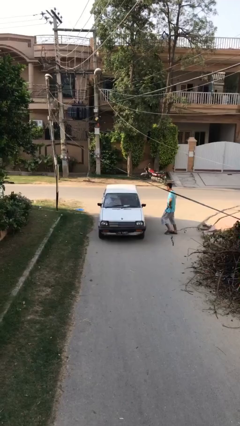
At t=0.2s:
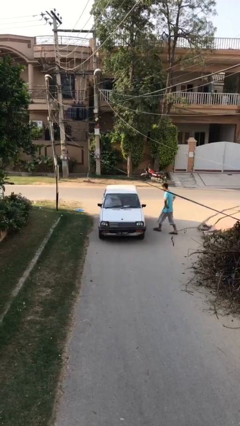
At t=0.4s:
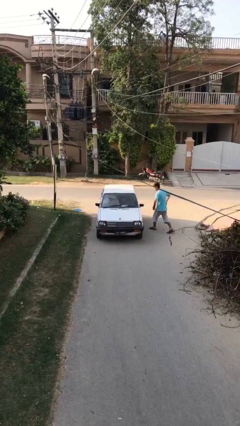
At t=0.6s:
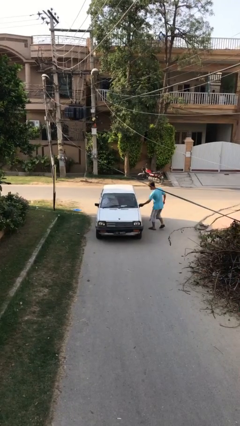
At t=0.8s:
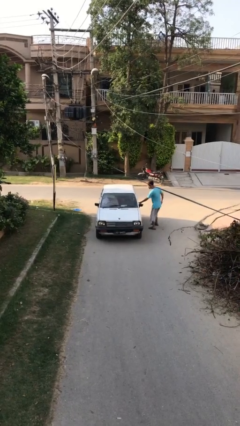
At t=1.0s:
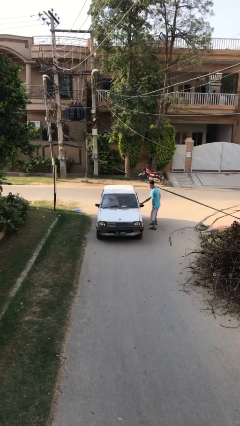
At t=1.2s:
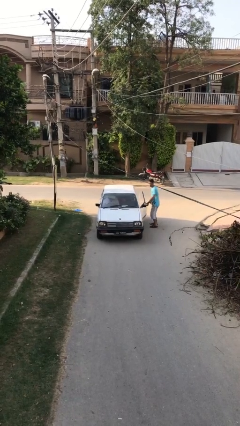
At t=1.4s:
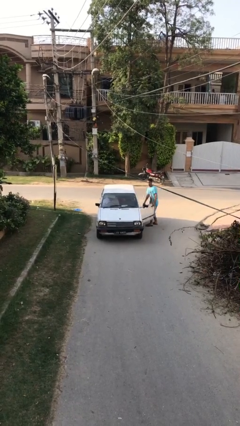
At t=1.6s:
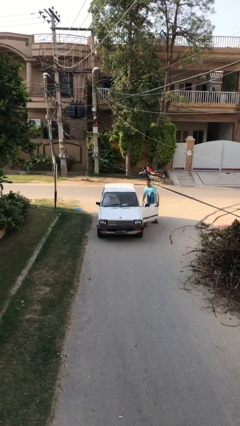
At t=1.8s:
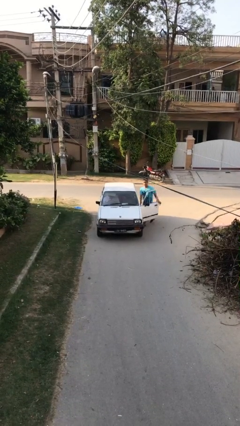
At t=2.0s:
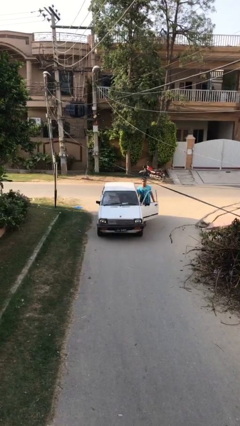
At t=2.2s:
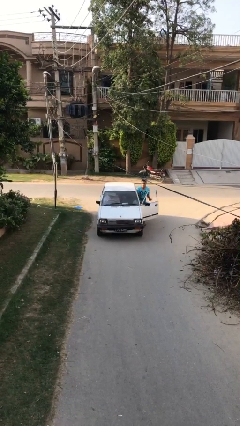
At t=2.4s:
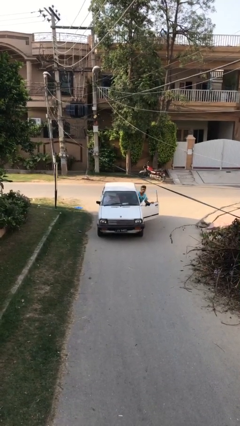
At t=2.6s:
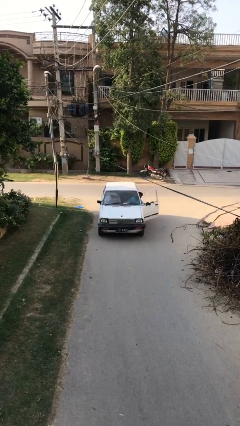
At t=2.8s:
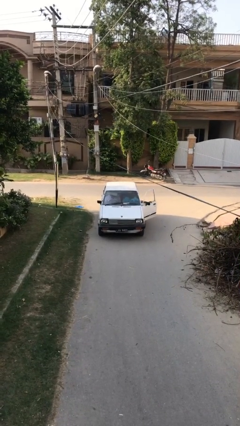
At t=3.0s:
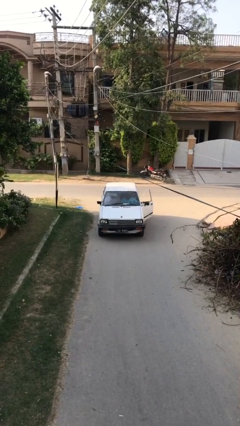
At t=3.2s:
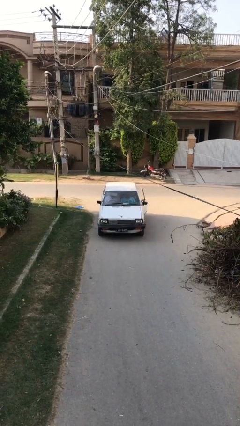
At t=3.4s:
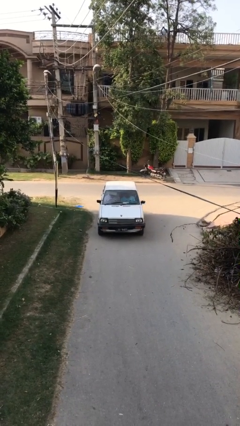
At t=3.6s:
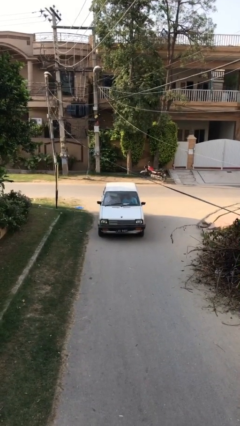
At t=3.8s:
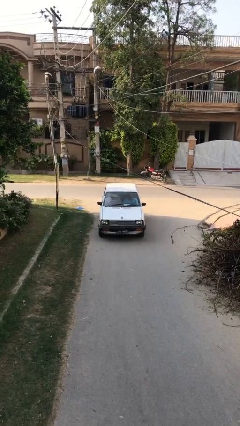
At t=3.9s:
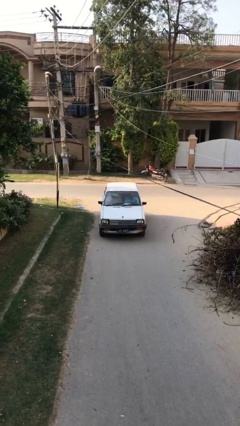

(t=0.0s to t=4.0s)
car picks up person

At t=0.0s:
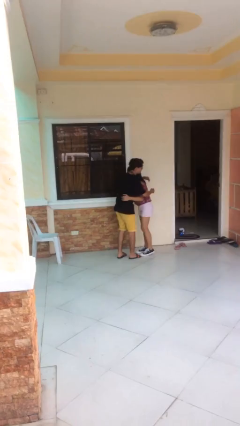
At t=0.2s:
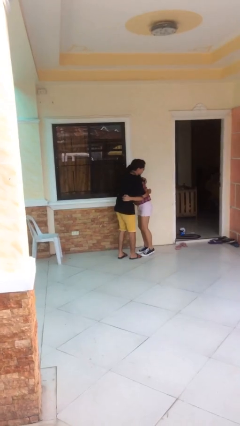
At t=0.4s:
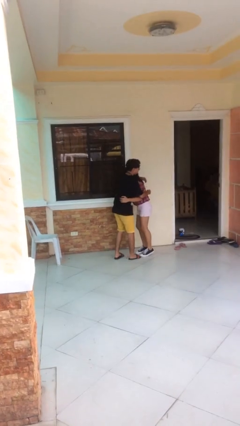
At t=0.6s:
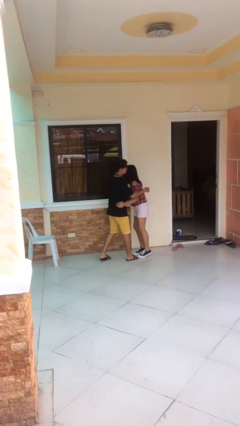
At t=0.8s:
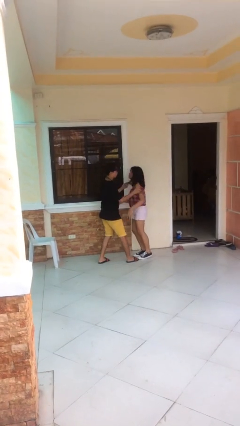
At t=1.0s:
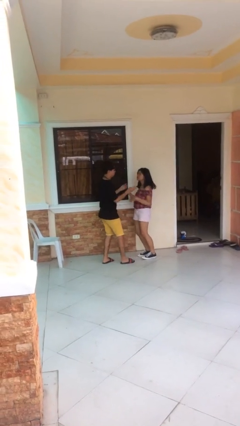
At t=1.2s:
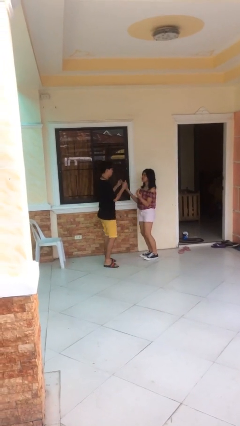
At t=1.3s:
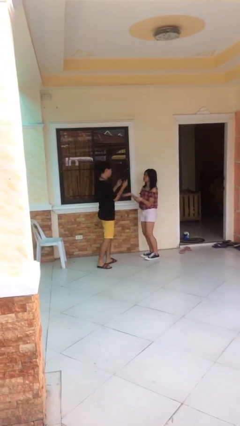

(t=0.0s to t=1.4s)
person embraces person

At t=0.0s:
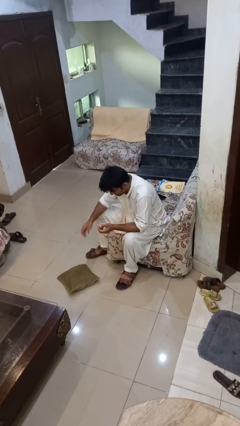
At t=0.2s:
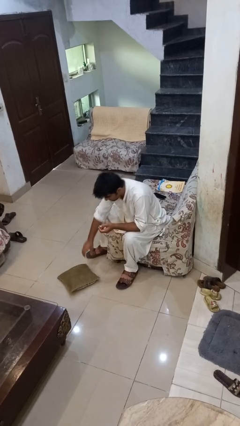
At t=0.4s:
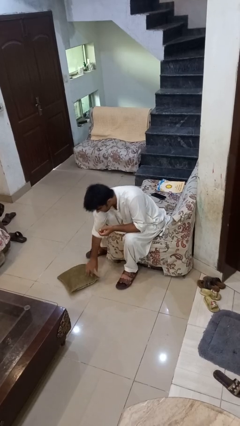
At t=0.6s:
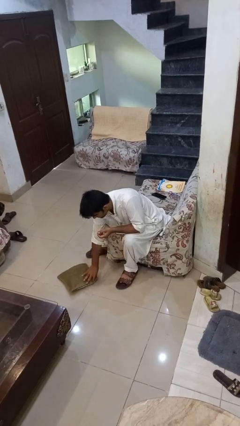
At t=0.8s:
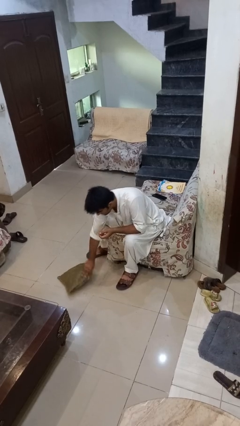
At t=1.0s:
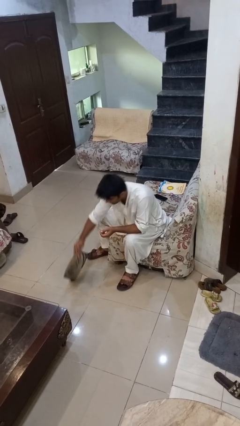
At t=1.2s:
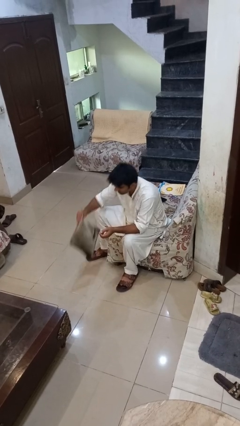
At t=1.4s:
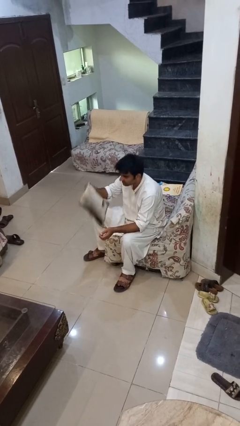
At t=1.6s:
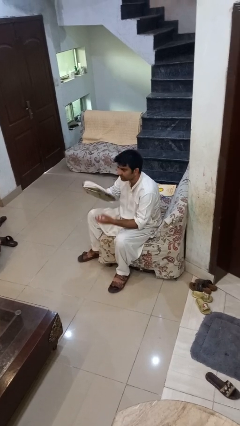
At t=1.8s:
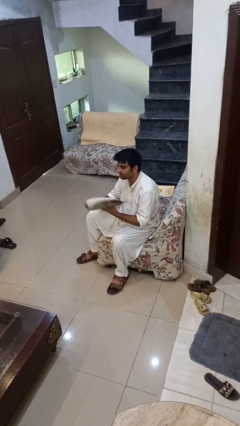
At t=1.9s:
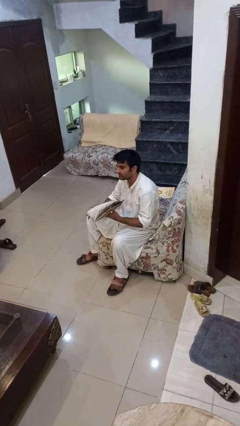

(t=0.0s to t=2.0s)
person picks up object from floor

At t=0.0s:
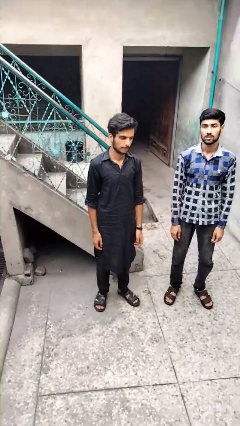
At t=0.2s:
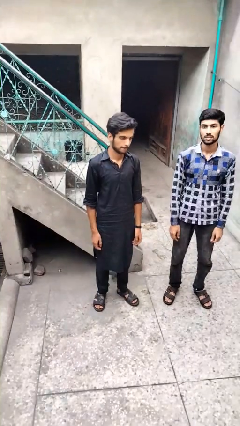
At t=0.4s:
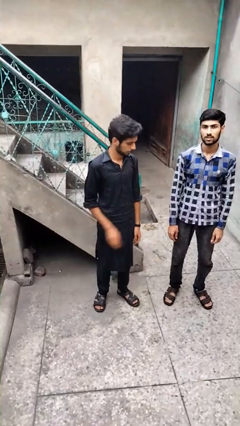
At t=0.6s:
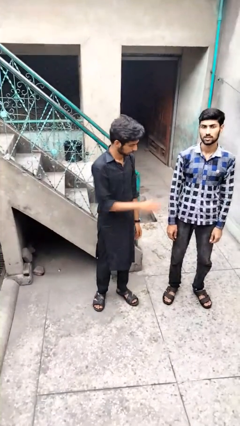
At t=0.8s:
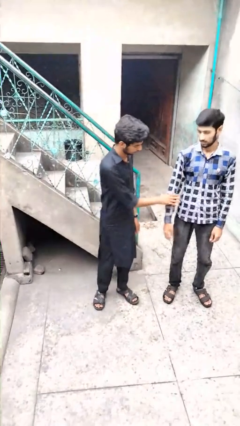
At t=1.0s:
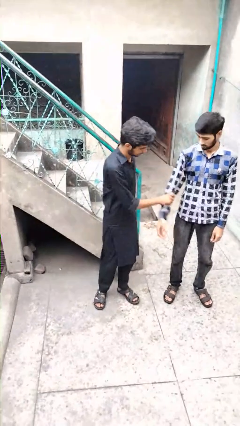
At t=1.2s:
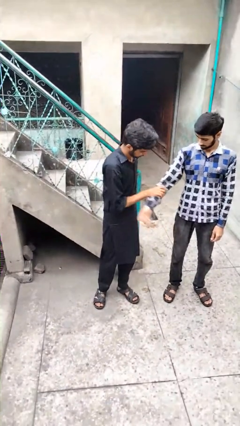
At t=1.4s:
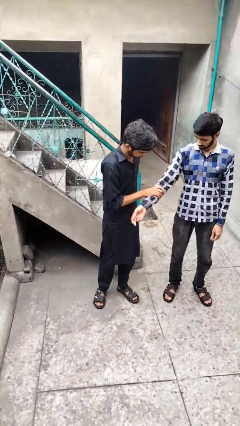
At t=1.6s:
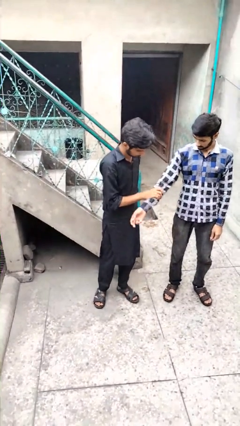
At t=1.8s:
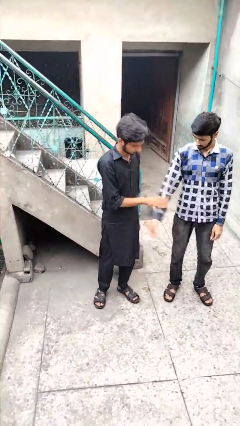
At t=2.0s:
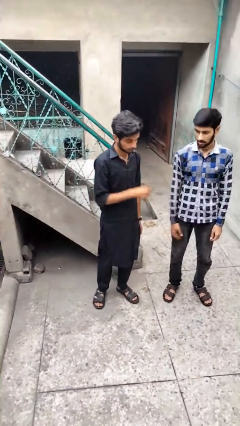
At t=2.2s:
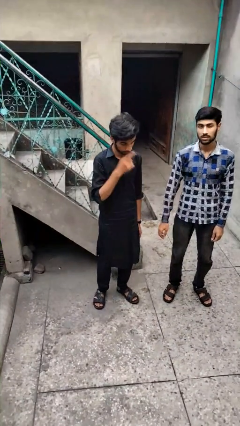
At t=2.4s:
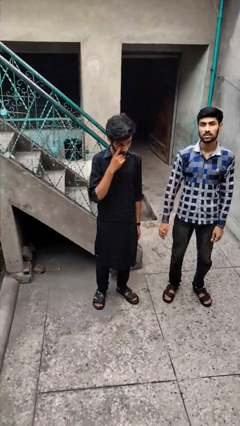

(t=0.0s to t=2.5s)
person grabs person by forearm

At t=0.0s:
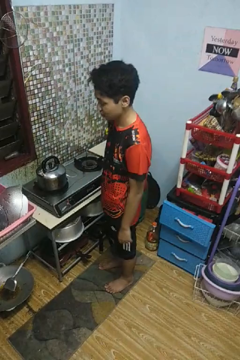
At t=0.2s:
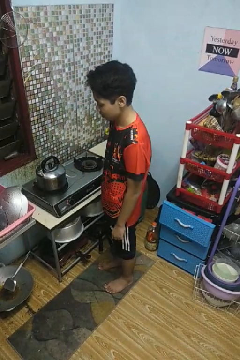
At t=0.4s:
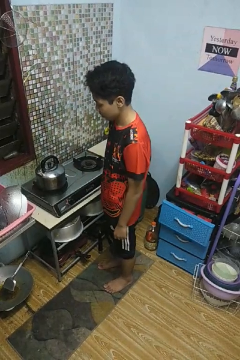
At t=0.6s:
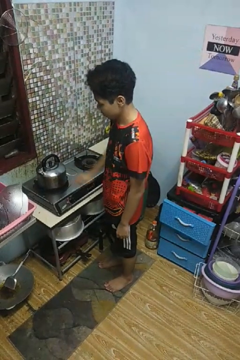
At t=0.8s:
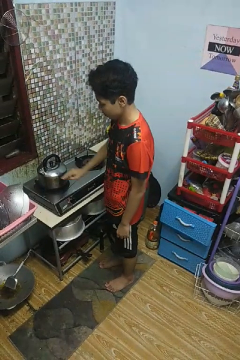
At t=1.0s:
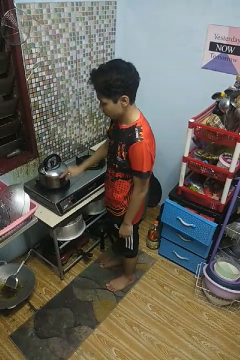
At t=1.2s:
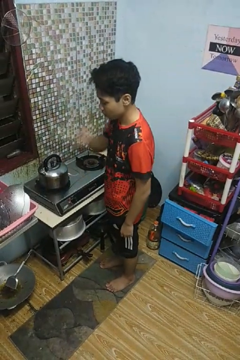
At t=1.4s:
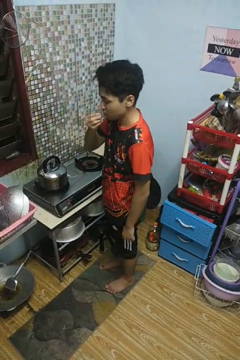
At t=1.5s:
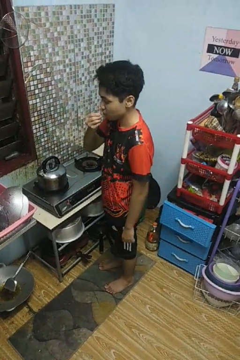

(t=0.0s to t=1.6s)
person burns hand

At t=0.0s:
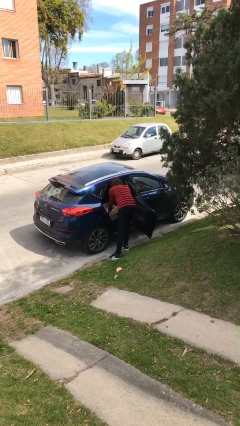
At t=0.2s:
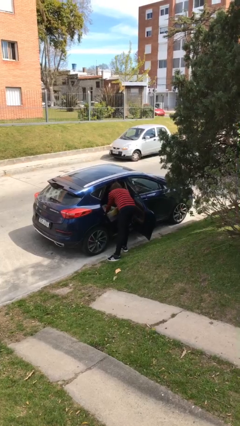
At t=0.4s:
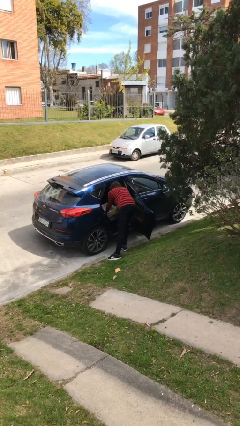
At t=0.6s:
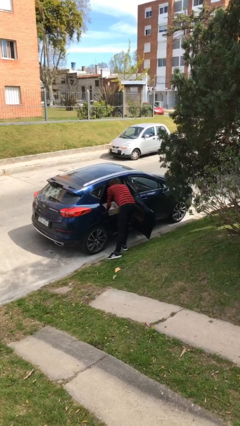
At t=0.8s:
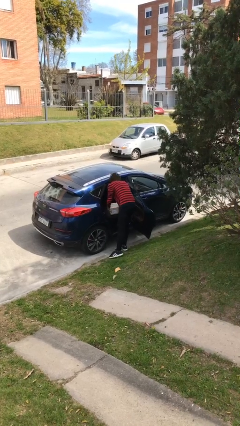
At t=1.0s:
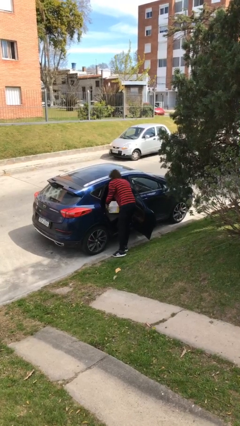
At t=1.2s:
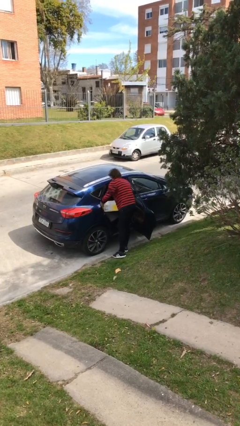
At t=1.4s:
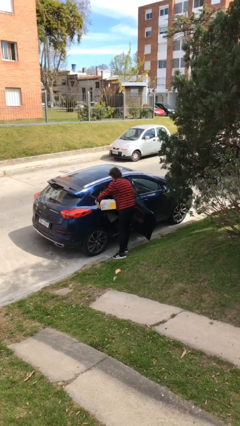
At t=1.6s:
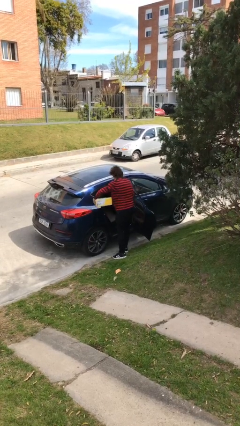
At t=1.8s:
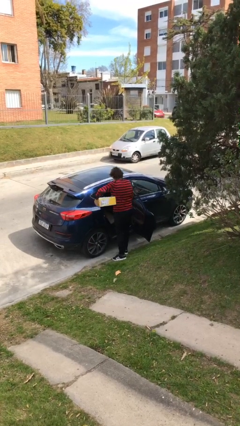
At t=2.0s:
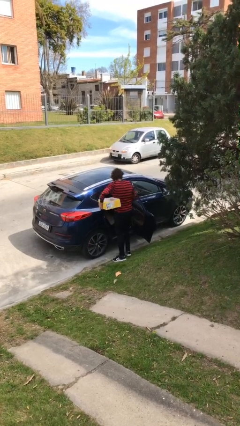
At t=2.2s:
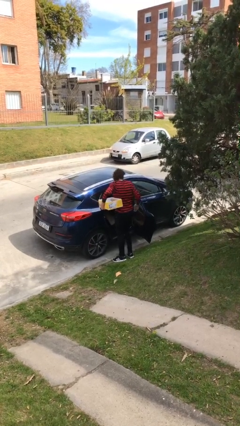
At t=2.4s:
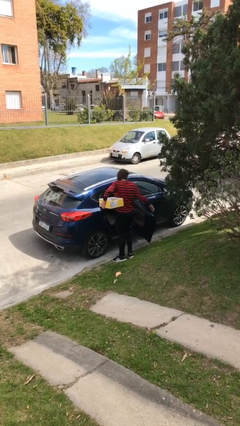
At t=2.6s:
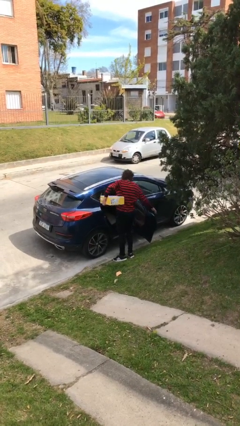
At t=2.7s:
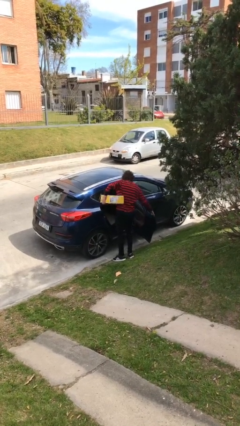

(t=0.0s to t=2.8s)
person unloads car

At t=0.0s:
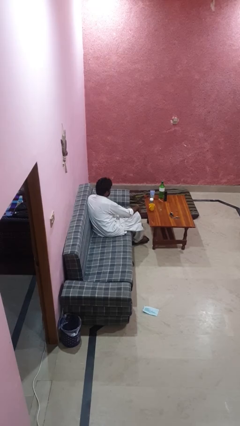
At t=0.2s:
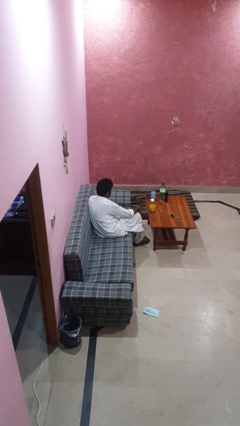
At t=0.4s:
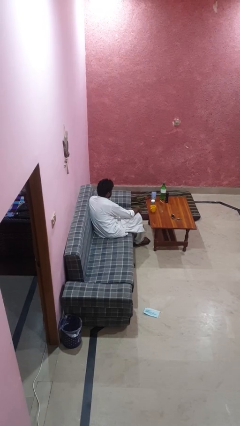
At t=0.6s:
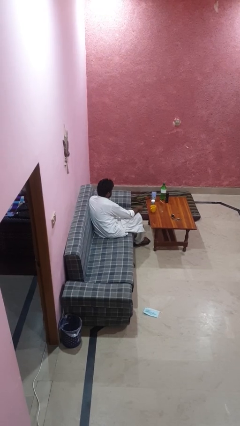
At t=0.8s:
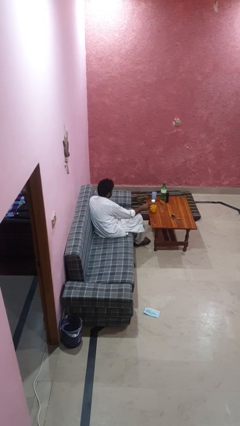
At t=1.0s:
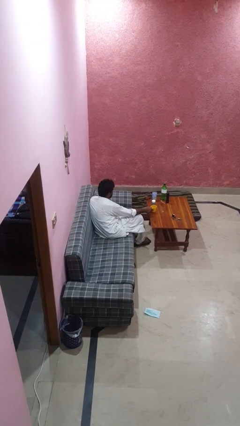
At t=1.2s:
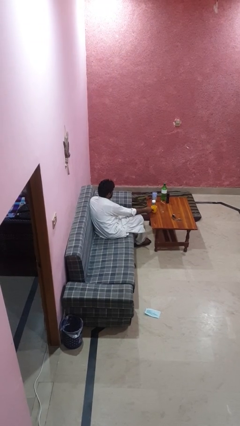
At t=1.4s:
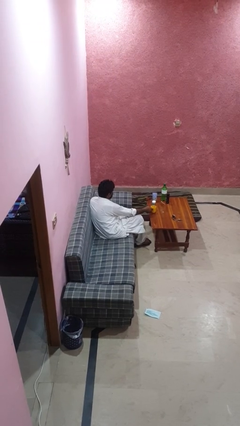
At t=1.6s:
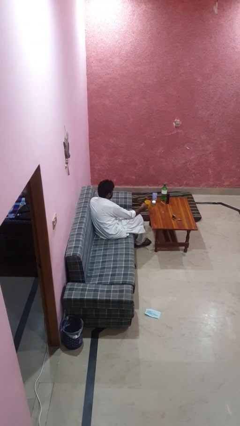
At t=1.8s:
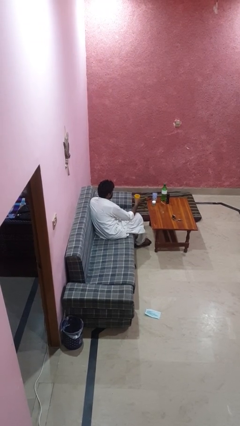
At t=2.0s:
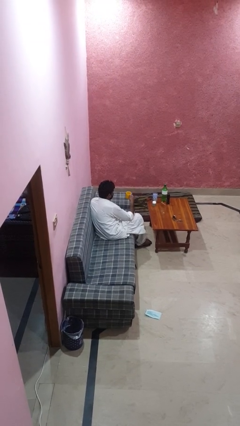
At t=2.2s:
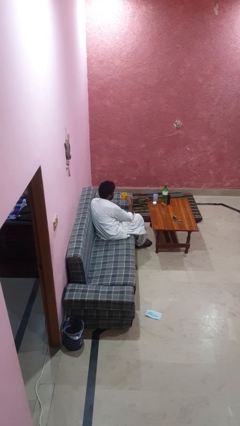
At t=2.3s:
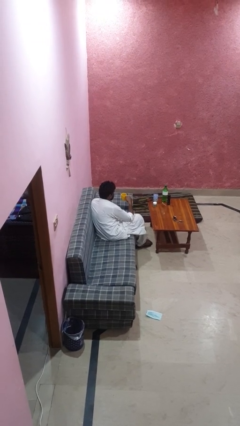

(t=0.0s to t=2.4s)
person picks up object from table

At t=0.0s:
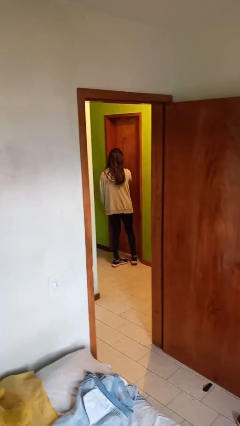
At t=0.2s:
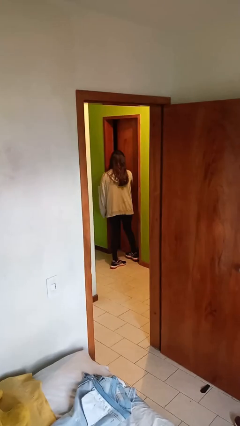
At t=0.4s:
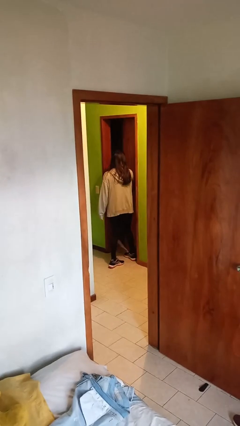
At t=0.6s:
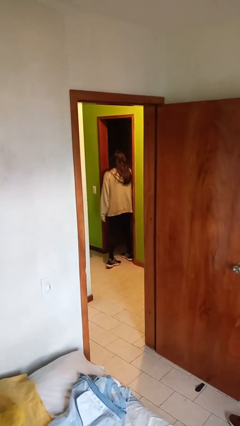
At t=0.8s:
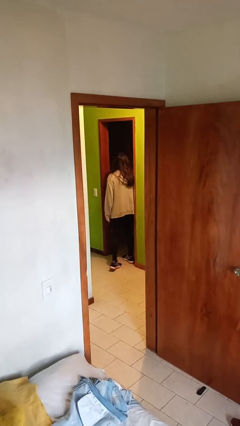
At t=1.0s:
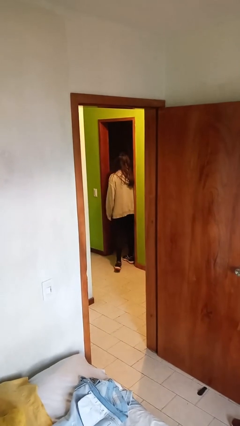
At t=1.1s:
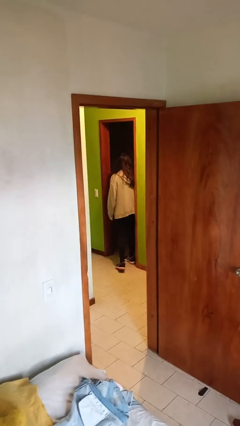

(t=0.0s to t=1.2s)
person opens facility door
